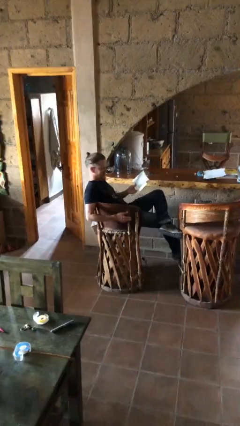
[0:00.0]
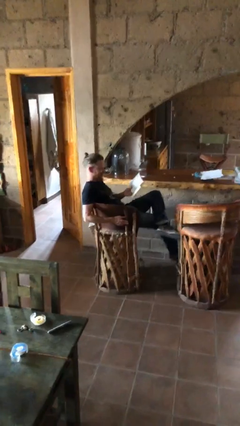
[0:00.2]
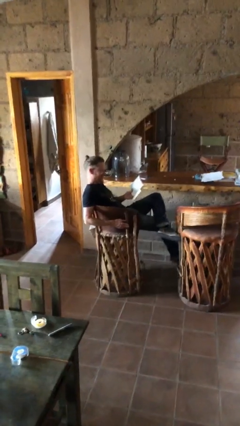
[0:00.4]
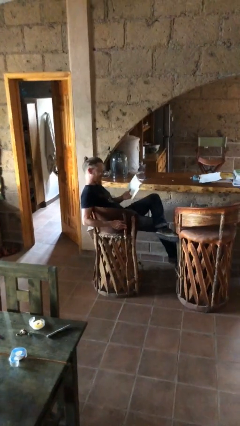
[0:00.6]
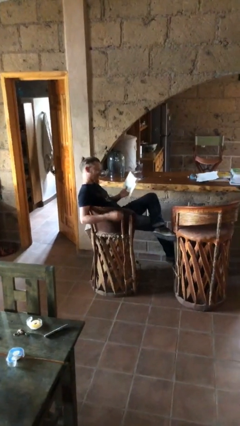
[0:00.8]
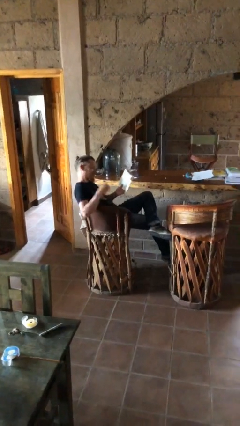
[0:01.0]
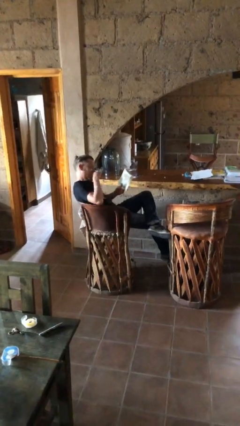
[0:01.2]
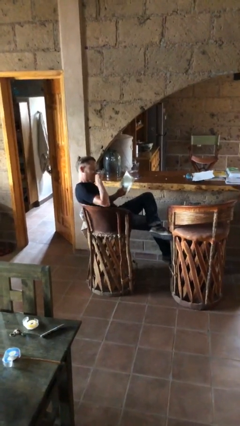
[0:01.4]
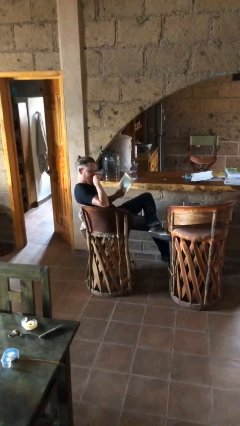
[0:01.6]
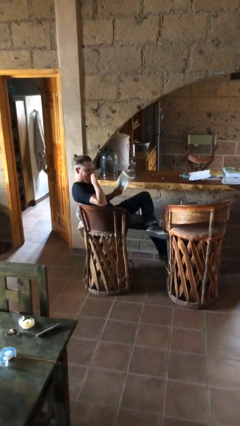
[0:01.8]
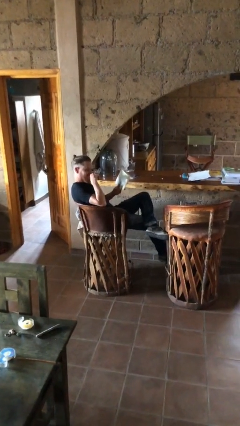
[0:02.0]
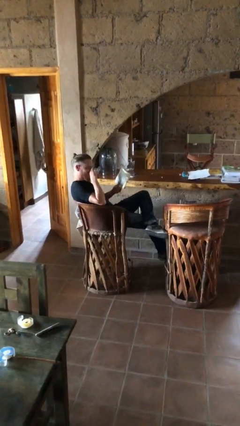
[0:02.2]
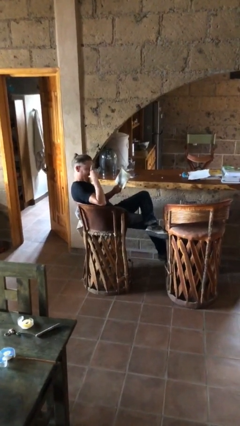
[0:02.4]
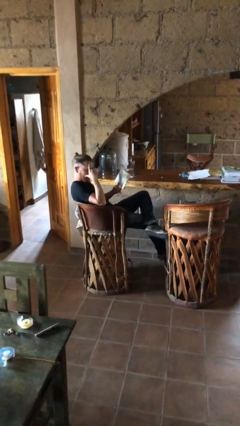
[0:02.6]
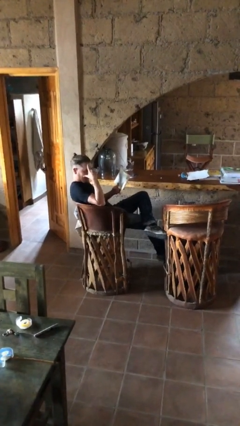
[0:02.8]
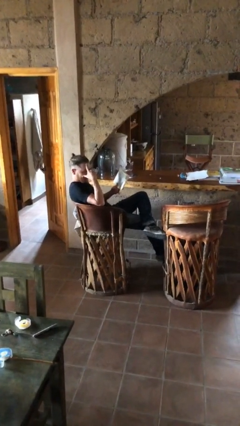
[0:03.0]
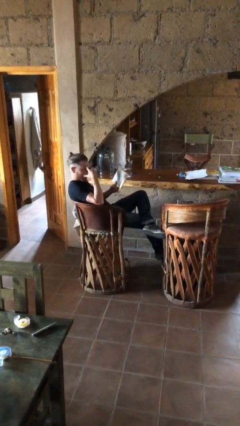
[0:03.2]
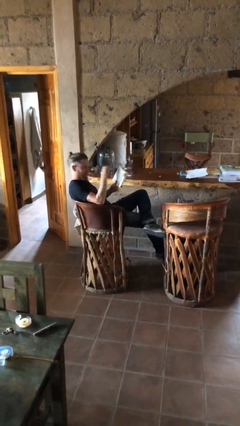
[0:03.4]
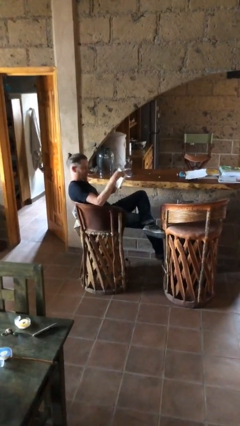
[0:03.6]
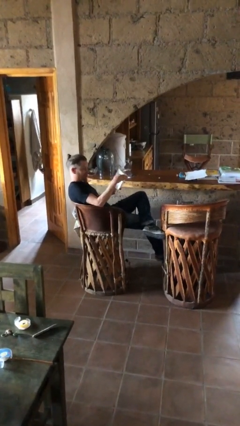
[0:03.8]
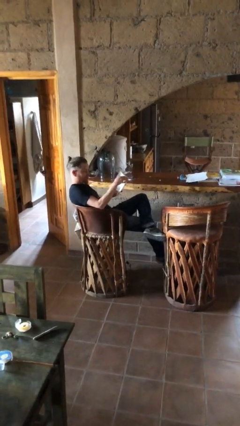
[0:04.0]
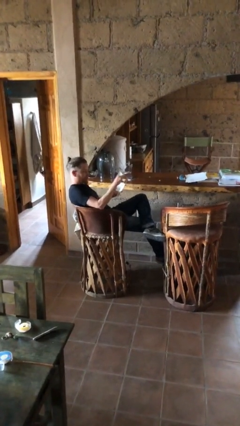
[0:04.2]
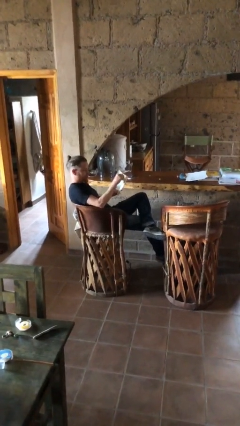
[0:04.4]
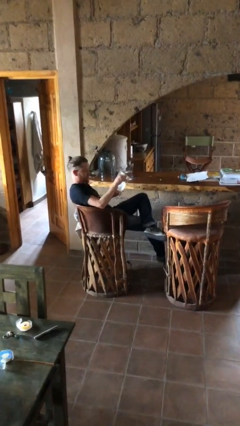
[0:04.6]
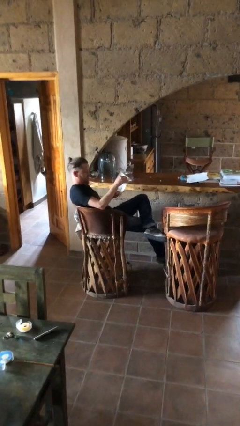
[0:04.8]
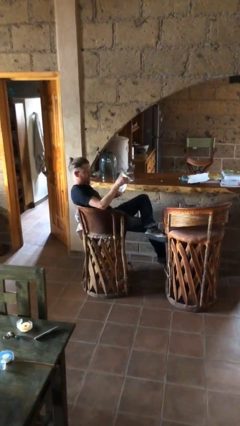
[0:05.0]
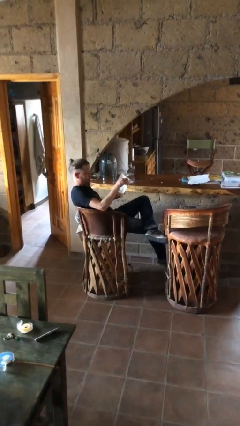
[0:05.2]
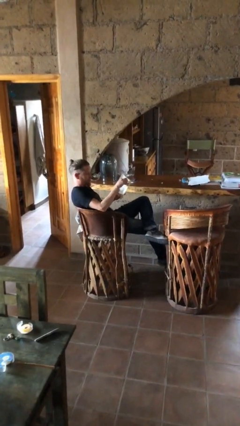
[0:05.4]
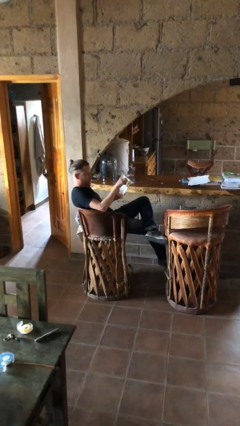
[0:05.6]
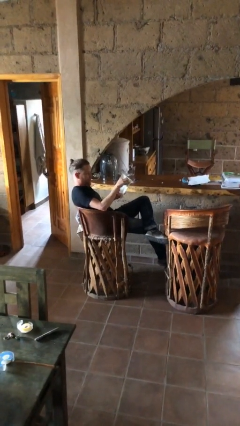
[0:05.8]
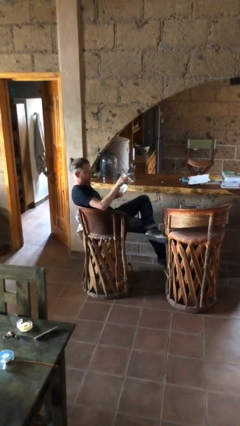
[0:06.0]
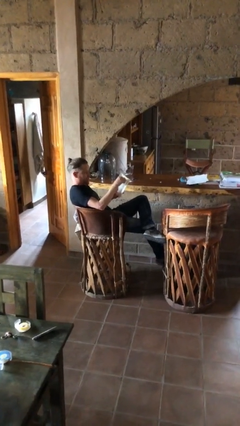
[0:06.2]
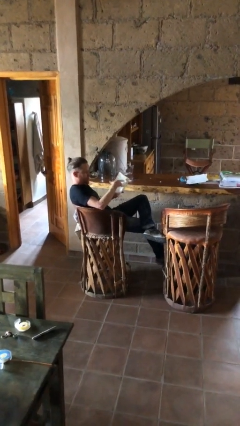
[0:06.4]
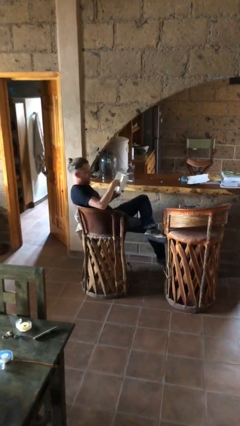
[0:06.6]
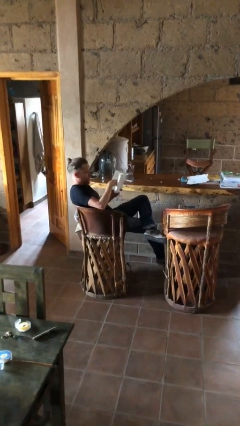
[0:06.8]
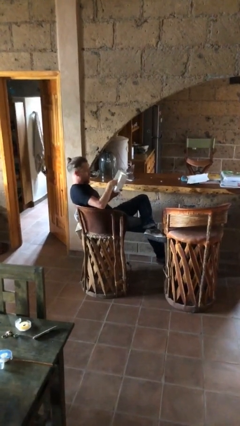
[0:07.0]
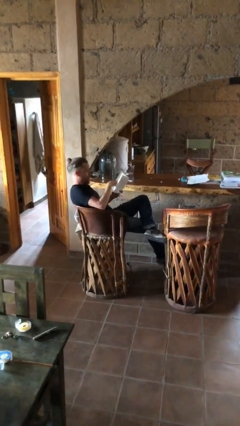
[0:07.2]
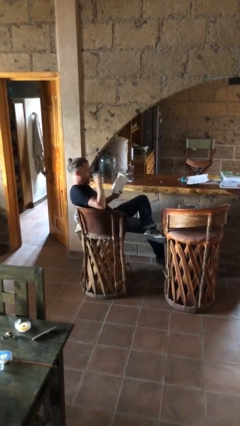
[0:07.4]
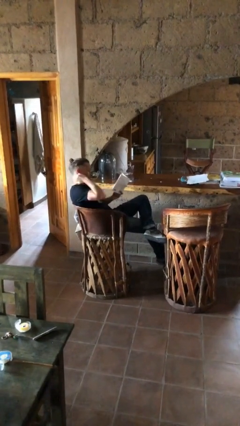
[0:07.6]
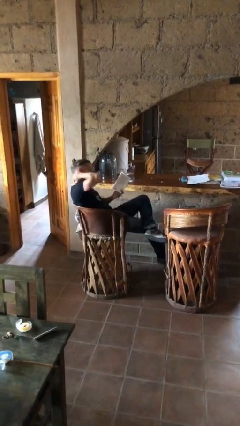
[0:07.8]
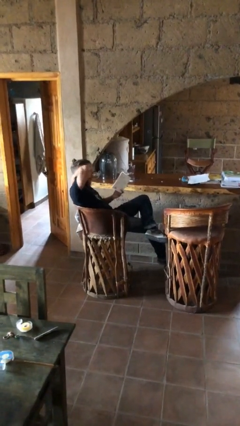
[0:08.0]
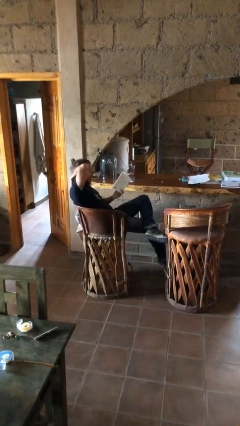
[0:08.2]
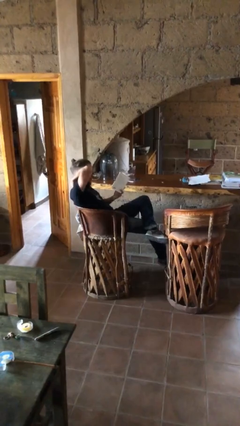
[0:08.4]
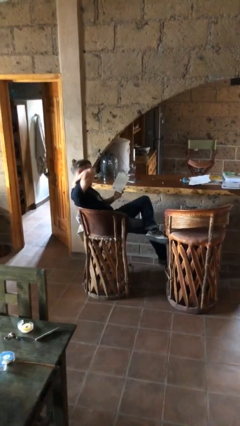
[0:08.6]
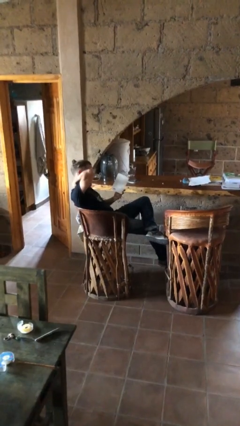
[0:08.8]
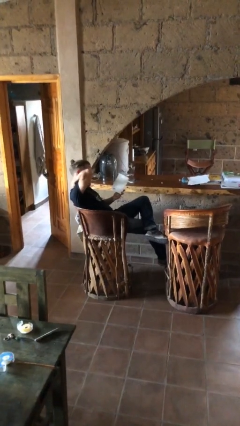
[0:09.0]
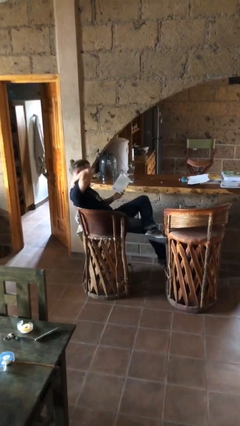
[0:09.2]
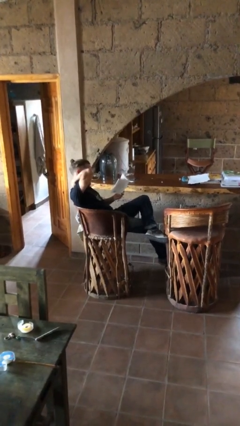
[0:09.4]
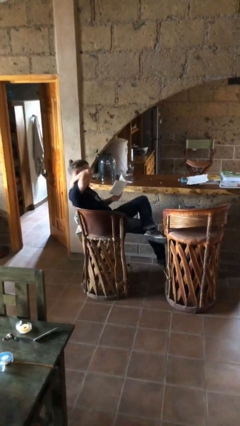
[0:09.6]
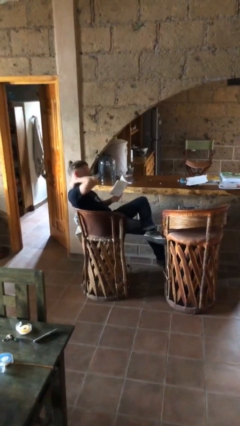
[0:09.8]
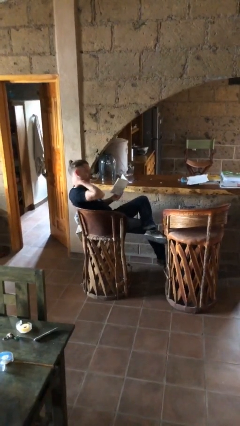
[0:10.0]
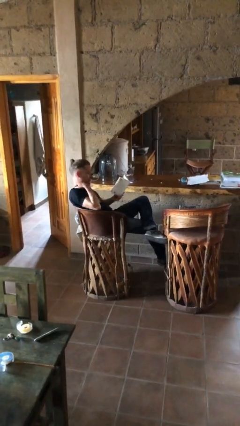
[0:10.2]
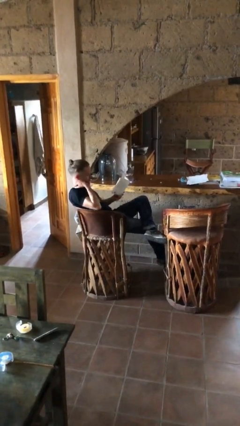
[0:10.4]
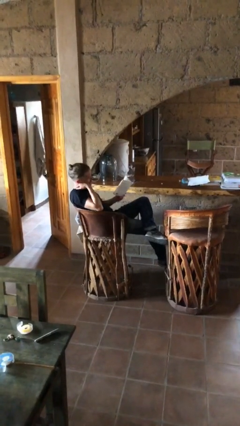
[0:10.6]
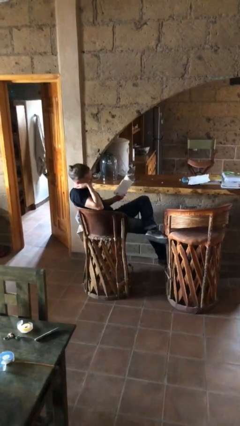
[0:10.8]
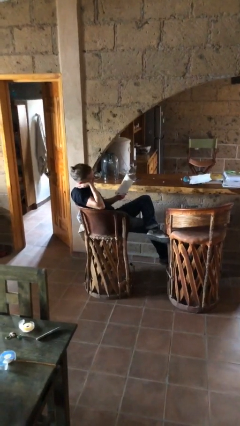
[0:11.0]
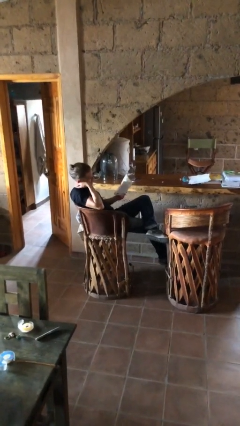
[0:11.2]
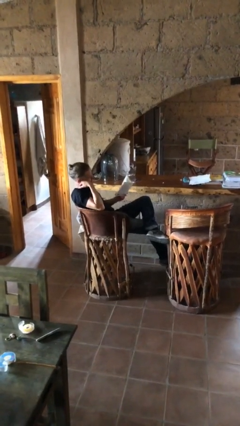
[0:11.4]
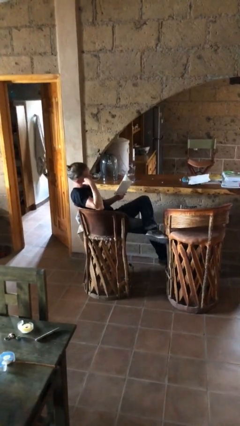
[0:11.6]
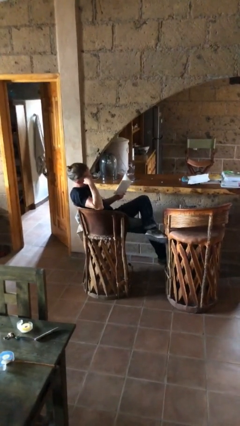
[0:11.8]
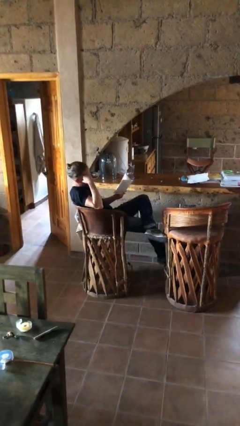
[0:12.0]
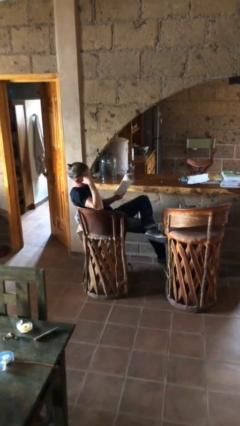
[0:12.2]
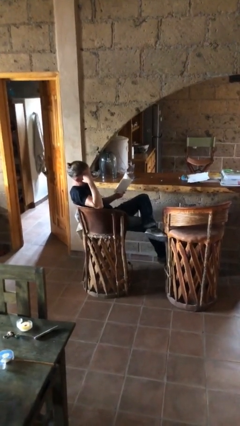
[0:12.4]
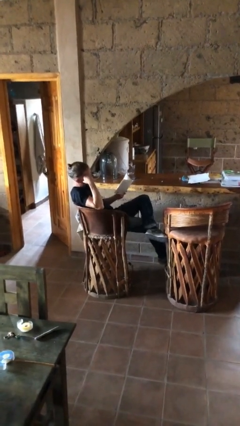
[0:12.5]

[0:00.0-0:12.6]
person reads document

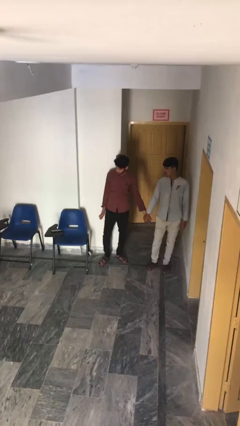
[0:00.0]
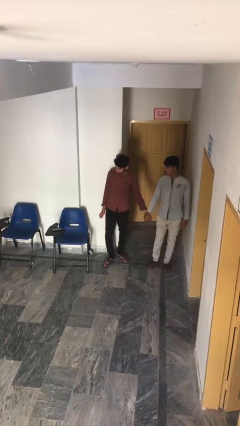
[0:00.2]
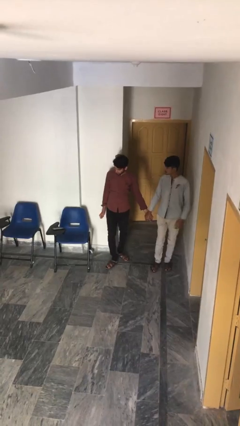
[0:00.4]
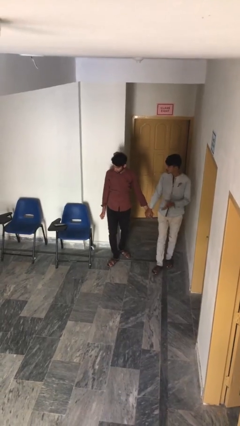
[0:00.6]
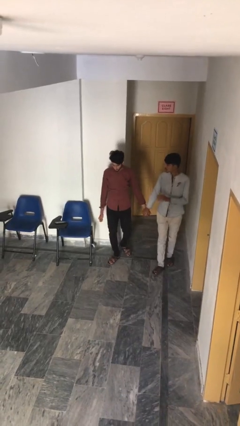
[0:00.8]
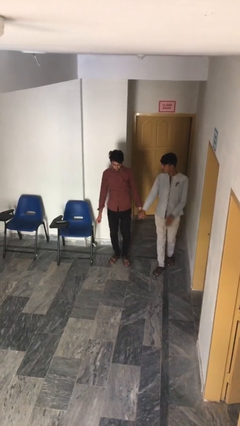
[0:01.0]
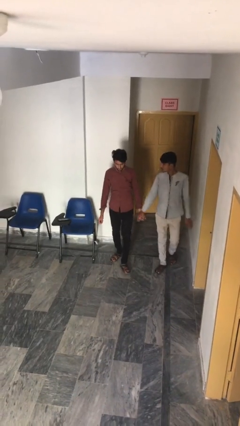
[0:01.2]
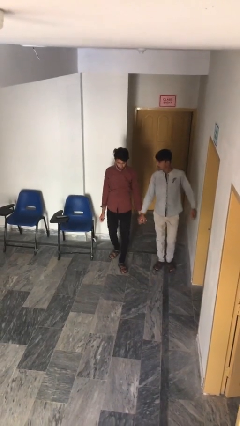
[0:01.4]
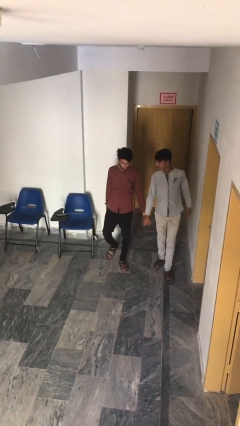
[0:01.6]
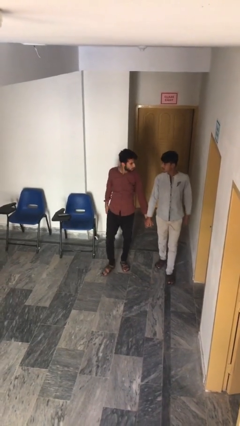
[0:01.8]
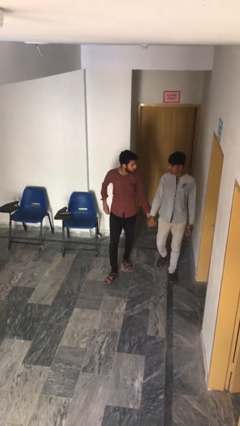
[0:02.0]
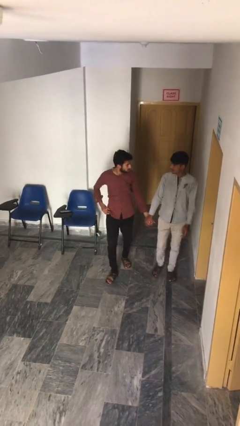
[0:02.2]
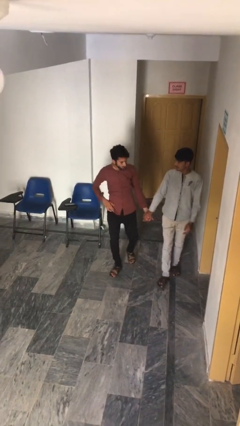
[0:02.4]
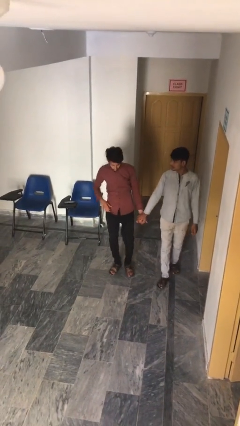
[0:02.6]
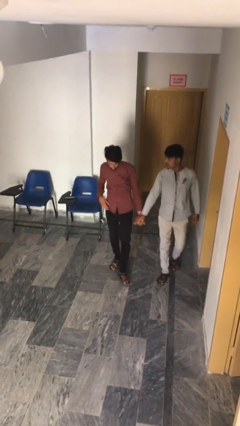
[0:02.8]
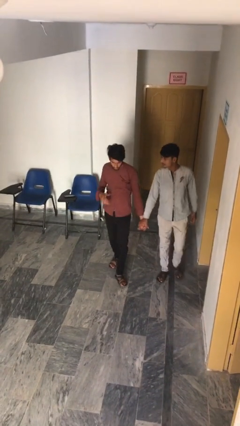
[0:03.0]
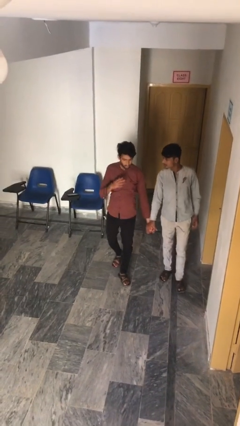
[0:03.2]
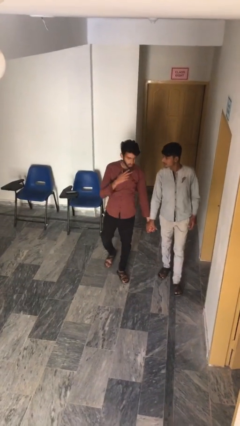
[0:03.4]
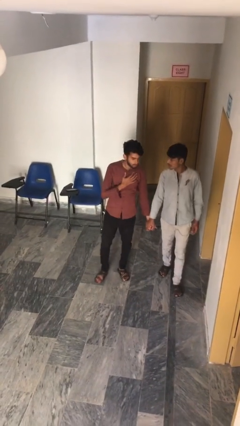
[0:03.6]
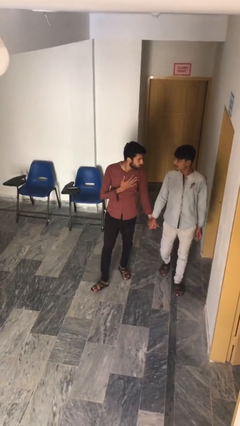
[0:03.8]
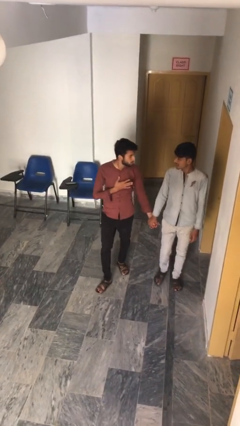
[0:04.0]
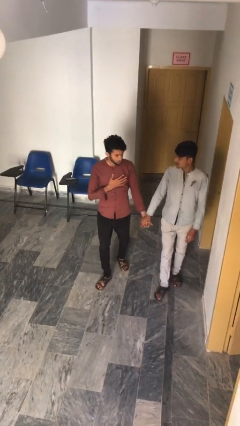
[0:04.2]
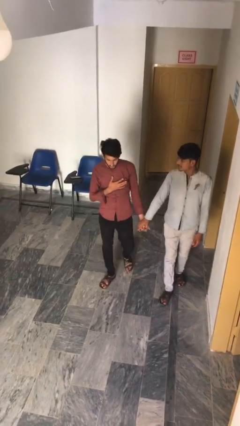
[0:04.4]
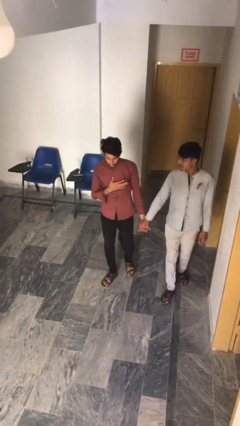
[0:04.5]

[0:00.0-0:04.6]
person holds hand

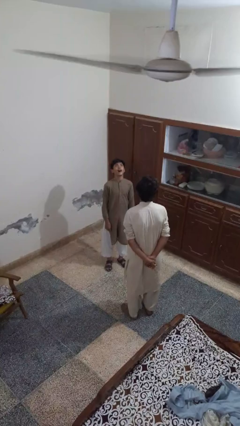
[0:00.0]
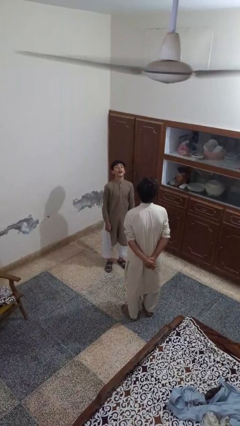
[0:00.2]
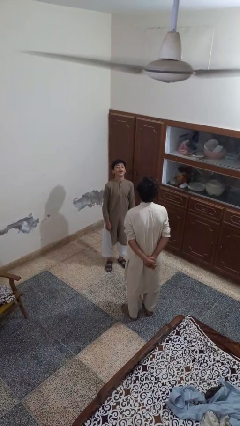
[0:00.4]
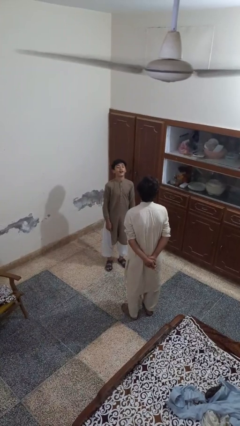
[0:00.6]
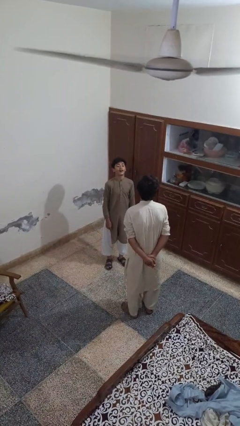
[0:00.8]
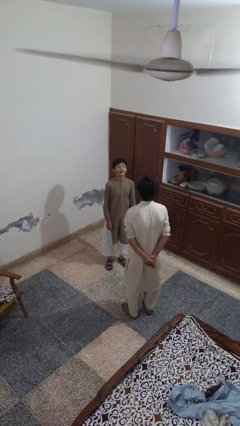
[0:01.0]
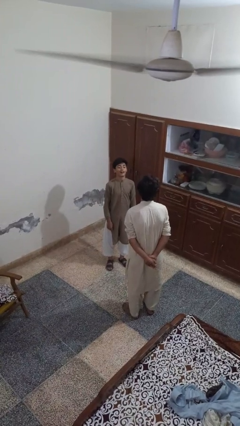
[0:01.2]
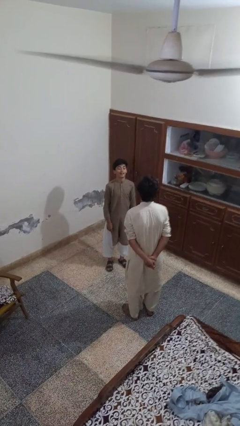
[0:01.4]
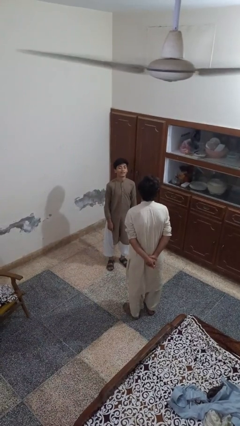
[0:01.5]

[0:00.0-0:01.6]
person laughs with person
